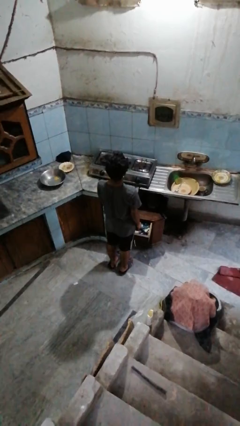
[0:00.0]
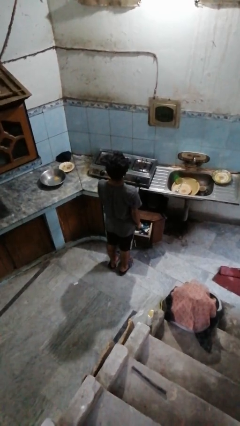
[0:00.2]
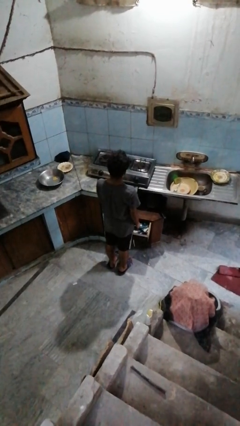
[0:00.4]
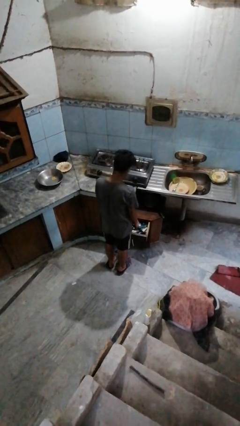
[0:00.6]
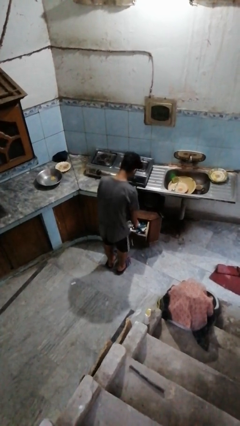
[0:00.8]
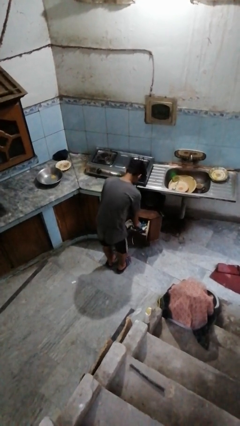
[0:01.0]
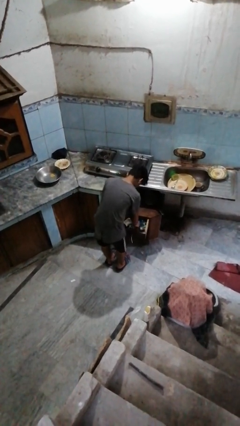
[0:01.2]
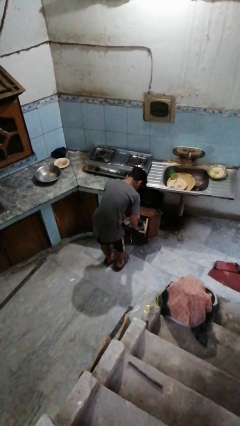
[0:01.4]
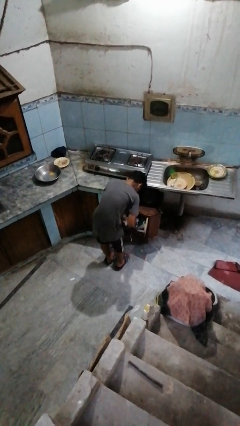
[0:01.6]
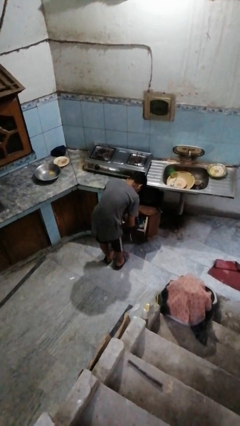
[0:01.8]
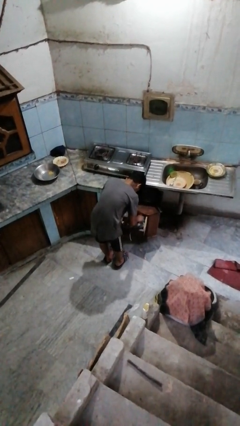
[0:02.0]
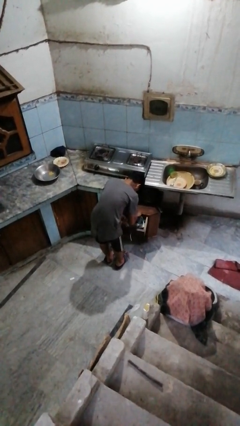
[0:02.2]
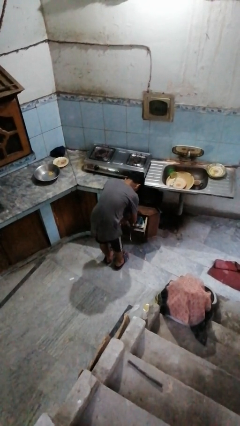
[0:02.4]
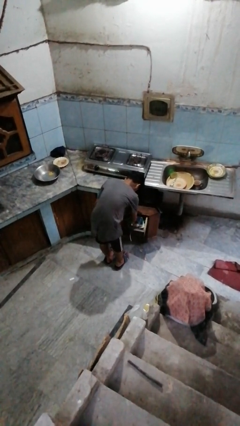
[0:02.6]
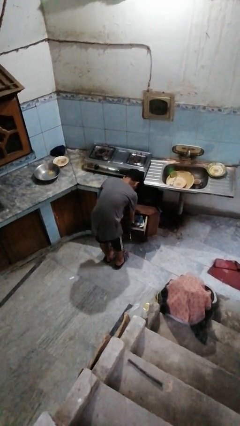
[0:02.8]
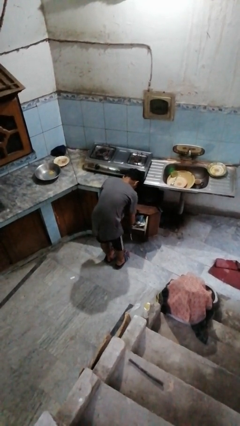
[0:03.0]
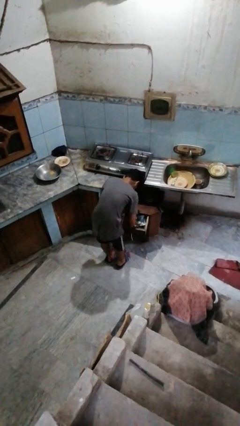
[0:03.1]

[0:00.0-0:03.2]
person searches in kitchen drawer

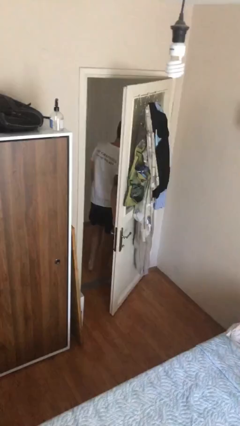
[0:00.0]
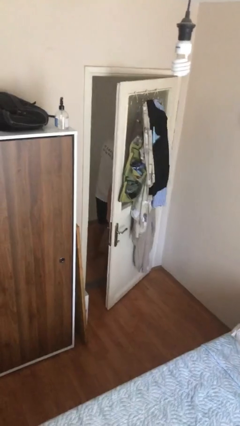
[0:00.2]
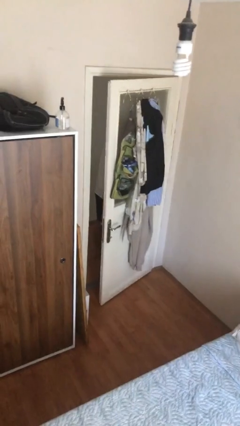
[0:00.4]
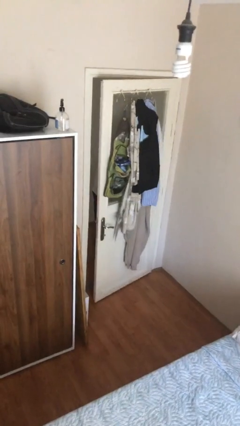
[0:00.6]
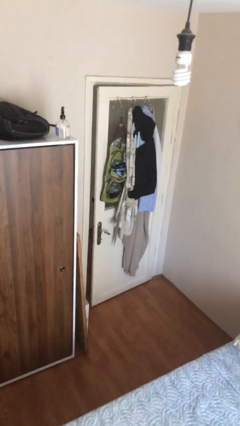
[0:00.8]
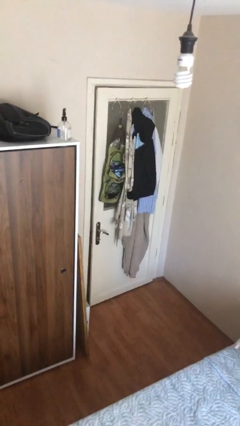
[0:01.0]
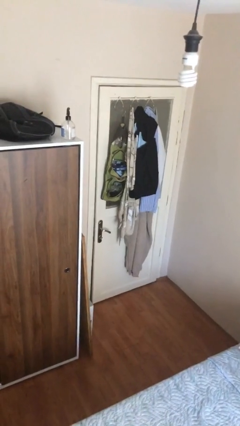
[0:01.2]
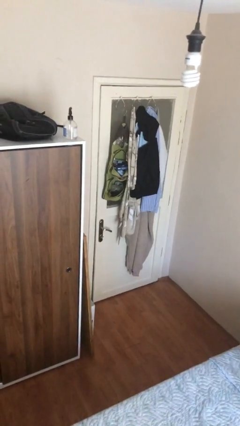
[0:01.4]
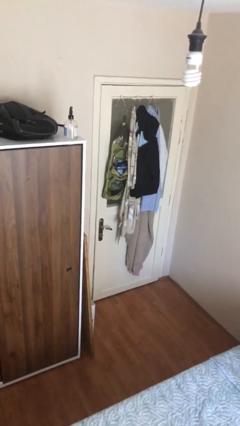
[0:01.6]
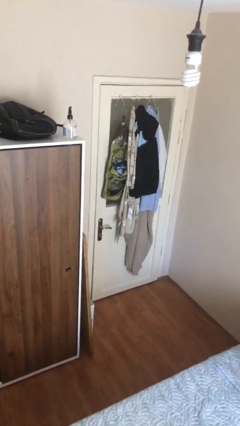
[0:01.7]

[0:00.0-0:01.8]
person closes facility door

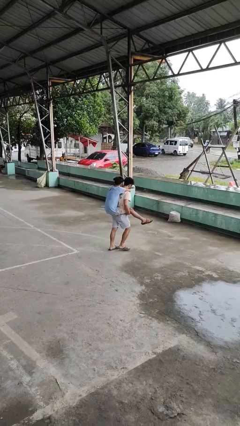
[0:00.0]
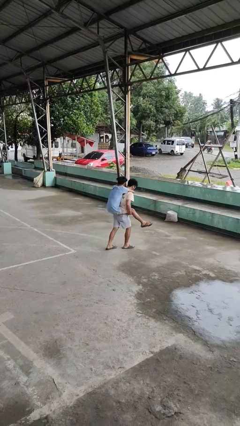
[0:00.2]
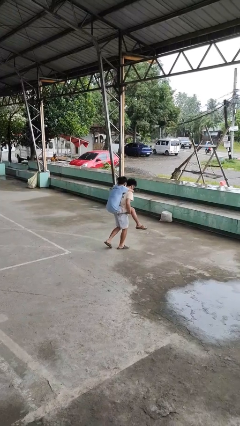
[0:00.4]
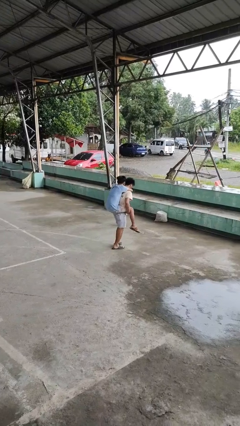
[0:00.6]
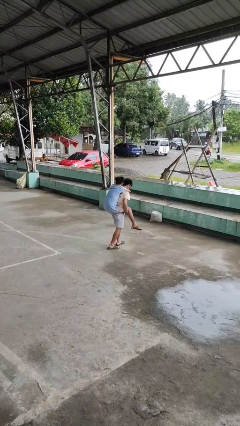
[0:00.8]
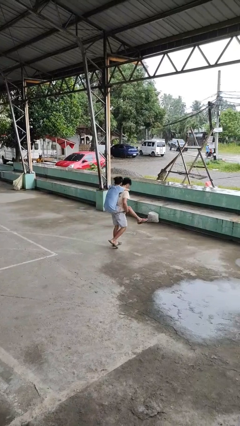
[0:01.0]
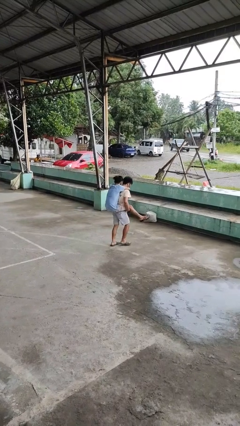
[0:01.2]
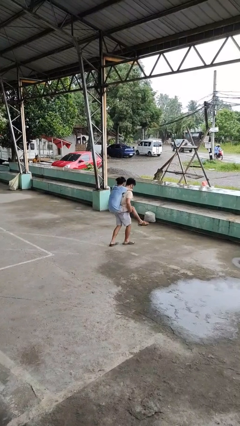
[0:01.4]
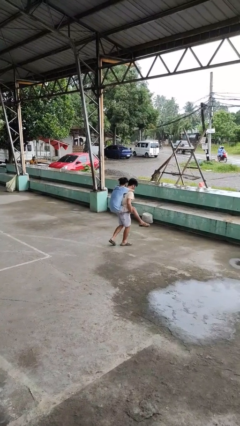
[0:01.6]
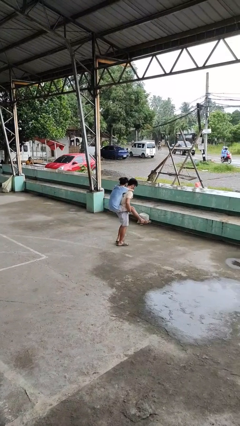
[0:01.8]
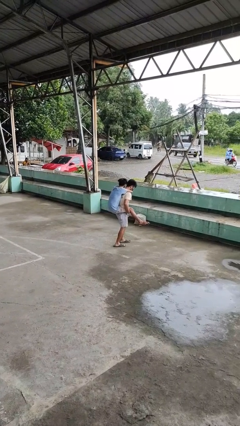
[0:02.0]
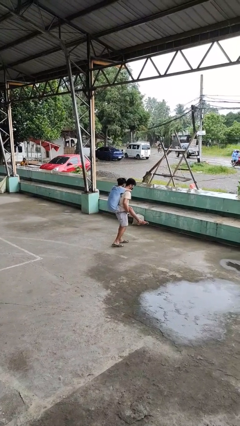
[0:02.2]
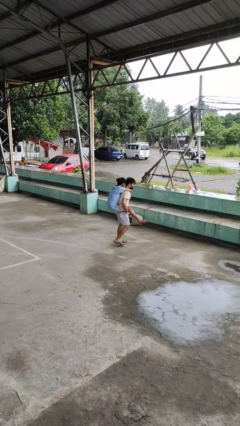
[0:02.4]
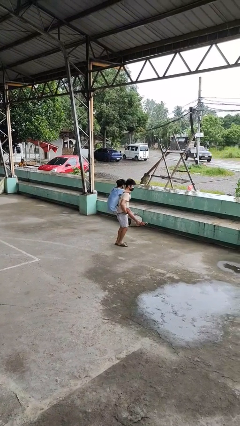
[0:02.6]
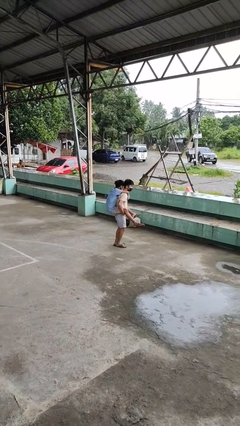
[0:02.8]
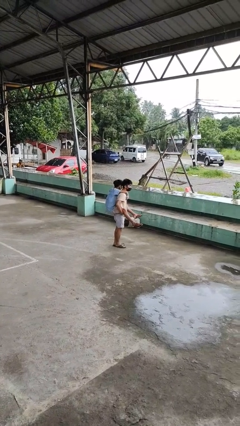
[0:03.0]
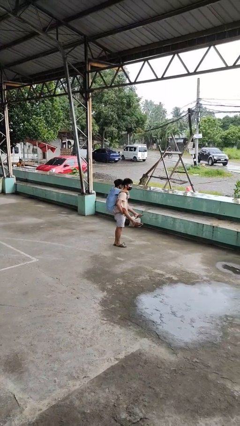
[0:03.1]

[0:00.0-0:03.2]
person carries person on back

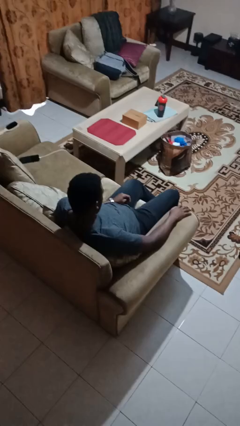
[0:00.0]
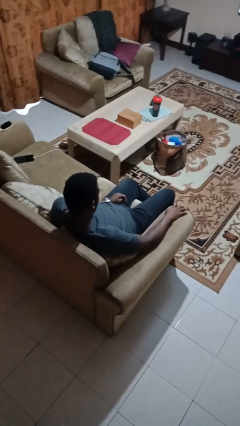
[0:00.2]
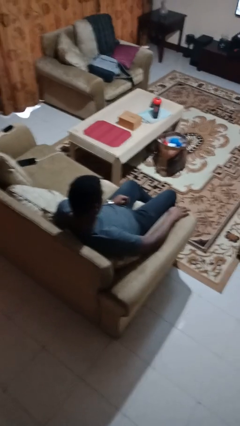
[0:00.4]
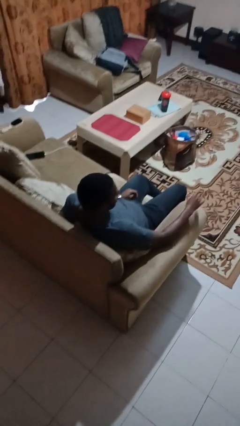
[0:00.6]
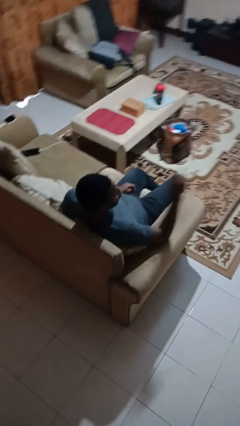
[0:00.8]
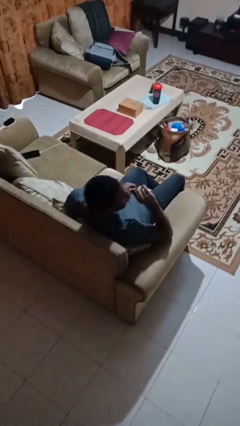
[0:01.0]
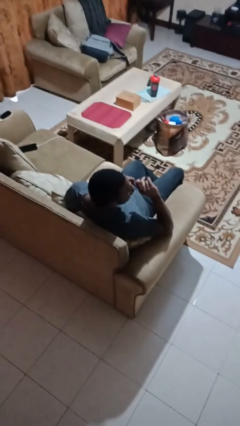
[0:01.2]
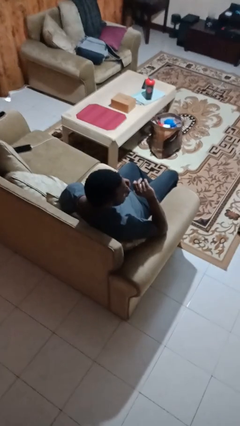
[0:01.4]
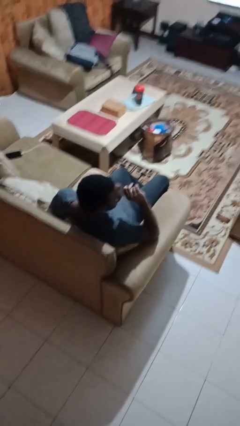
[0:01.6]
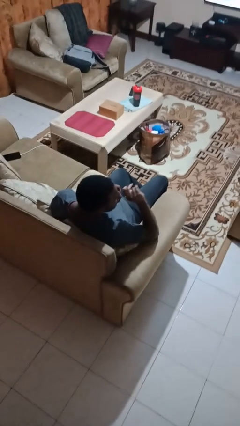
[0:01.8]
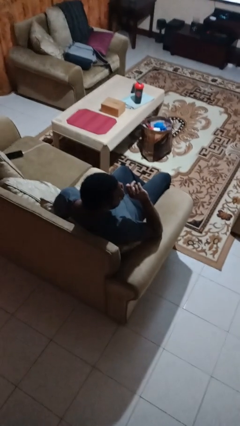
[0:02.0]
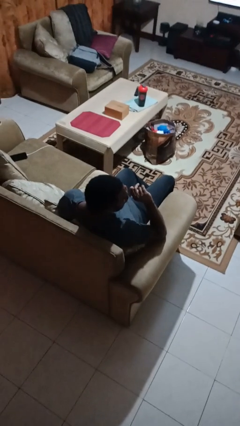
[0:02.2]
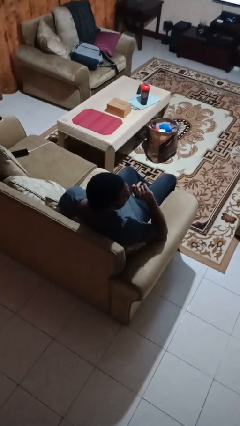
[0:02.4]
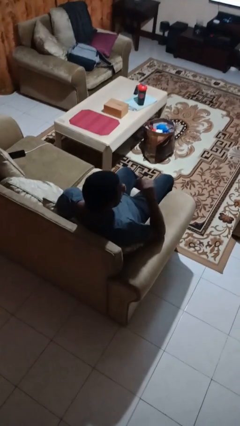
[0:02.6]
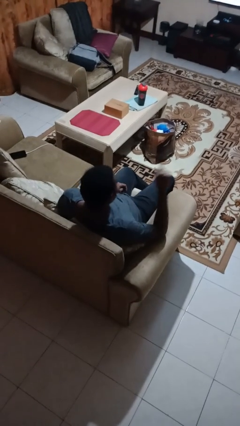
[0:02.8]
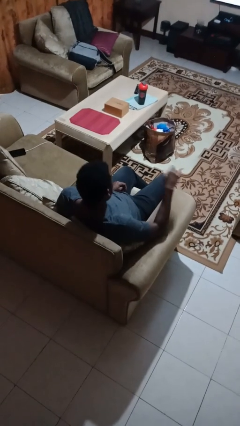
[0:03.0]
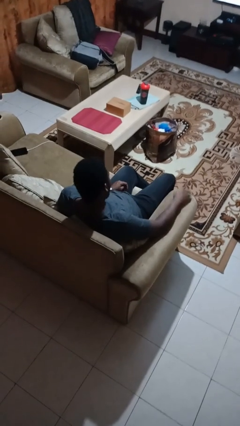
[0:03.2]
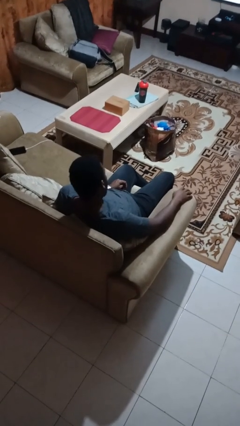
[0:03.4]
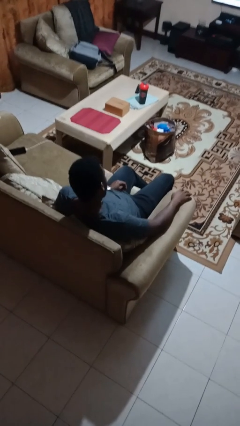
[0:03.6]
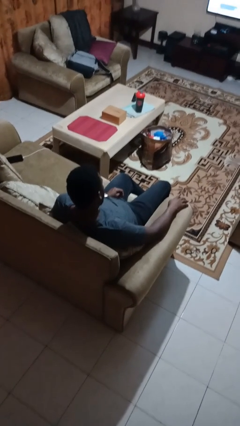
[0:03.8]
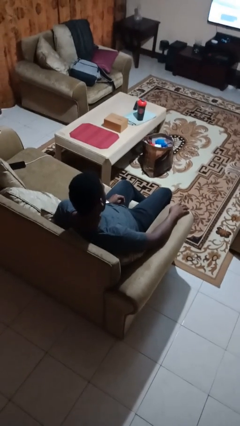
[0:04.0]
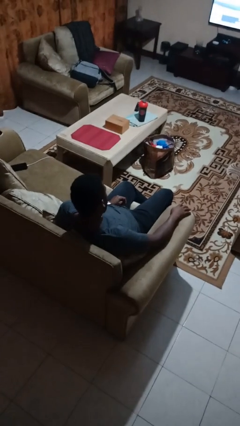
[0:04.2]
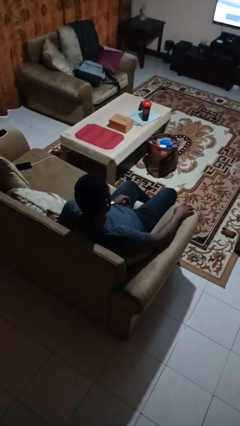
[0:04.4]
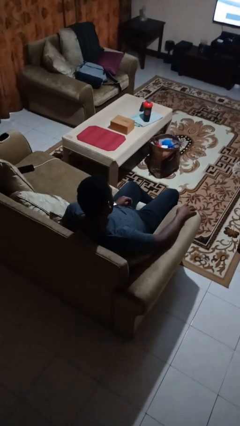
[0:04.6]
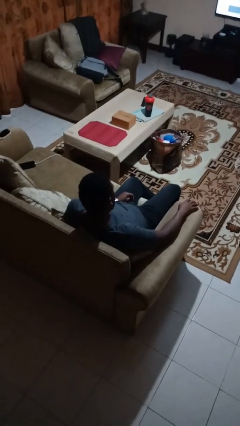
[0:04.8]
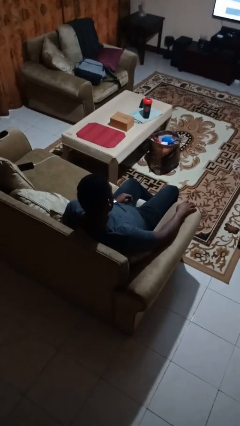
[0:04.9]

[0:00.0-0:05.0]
person gestures be quiet

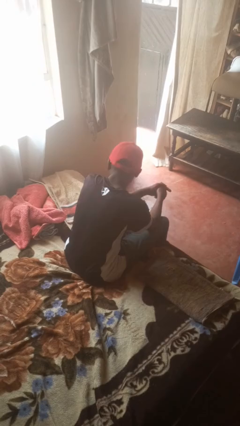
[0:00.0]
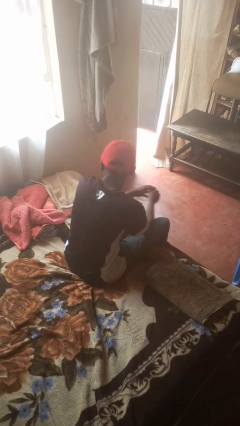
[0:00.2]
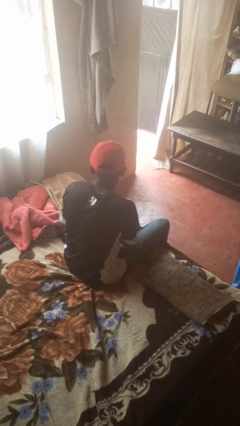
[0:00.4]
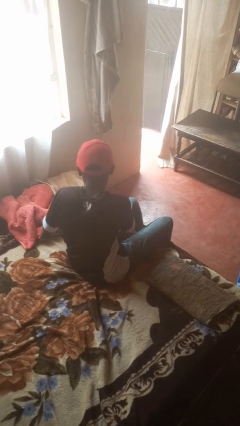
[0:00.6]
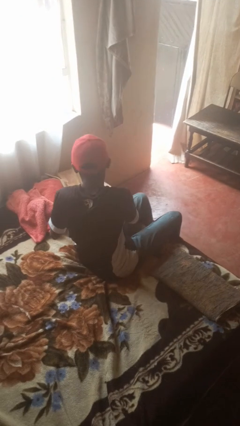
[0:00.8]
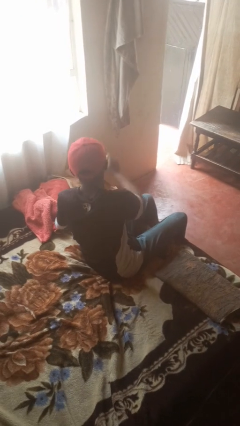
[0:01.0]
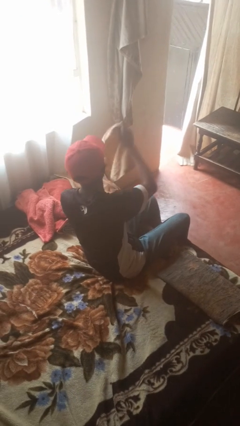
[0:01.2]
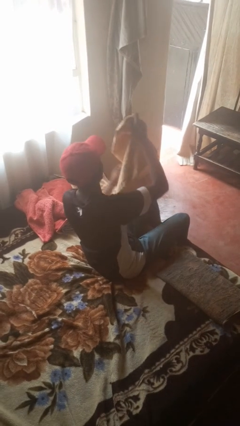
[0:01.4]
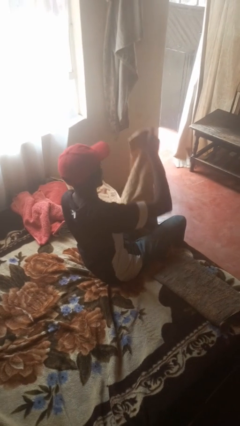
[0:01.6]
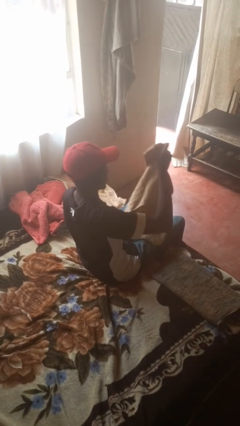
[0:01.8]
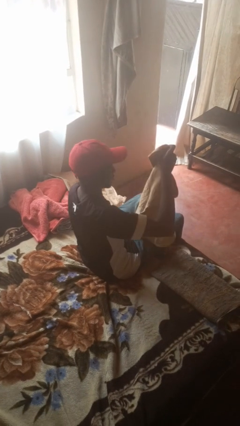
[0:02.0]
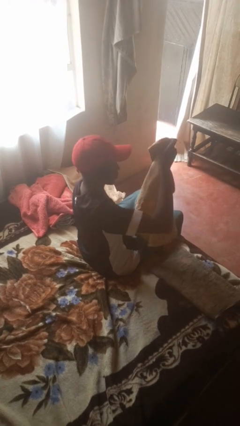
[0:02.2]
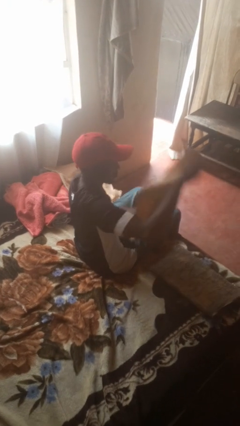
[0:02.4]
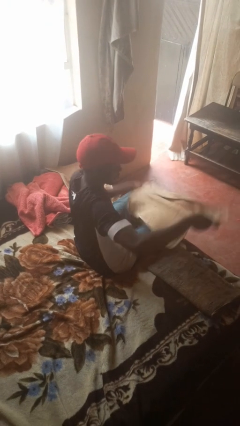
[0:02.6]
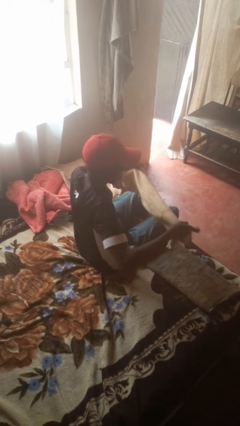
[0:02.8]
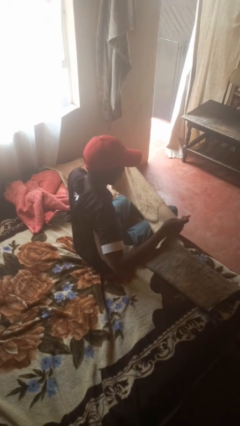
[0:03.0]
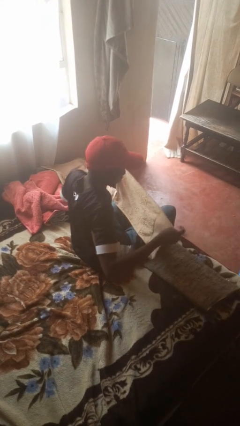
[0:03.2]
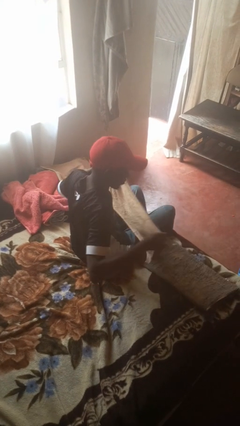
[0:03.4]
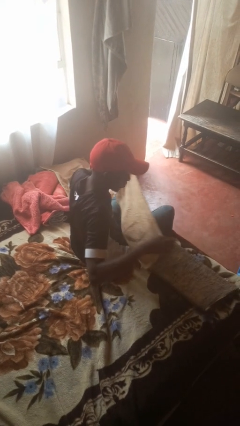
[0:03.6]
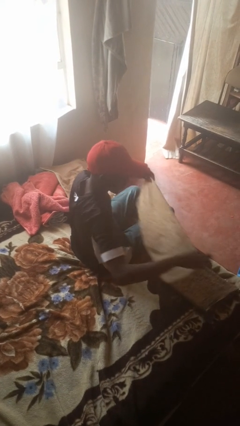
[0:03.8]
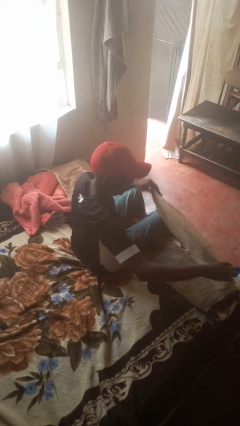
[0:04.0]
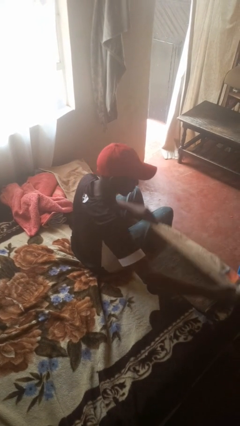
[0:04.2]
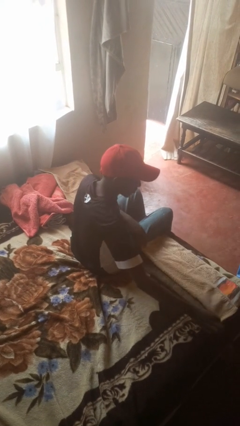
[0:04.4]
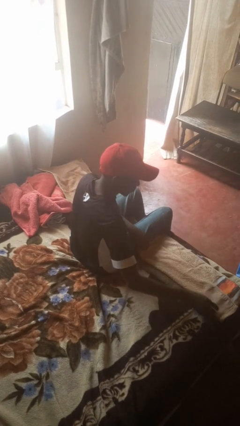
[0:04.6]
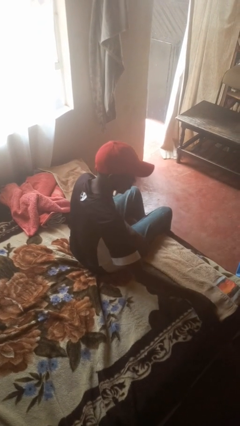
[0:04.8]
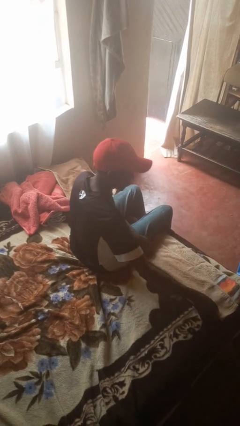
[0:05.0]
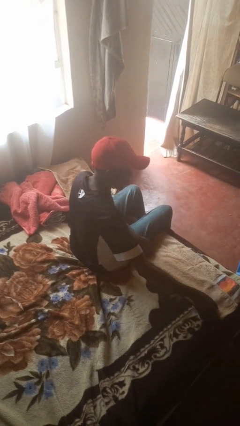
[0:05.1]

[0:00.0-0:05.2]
person folds towel
